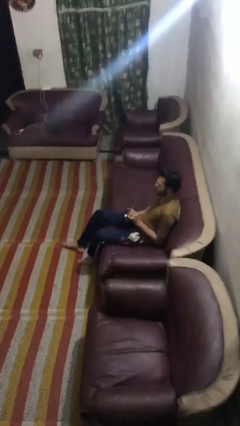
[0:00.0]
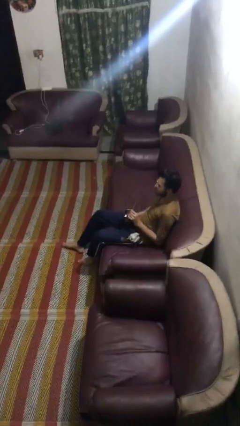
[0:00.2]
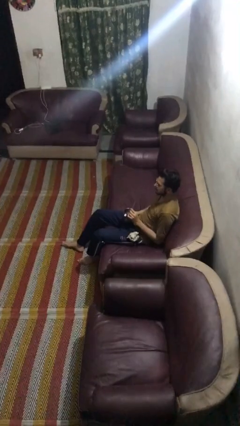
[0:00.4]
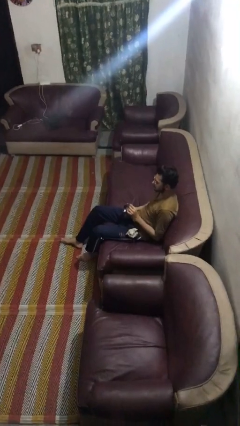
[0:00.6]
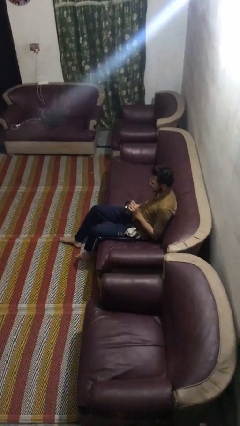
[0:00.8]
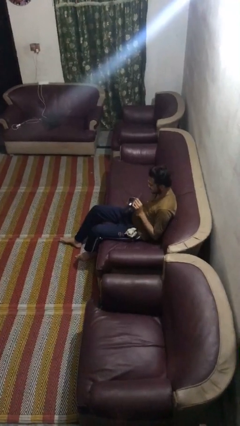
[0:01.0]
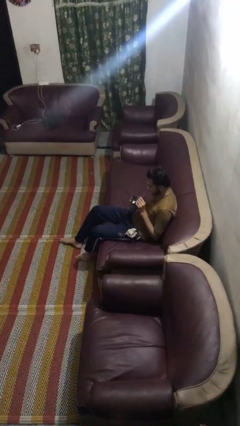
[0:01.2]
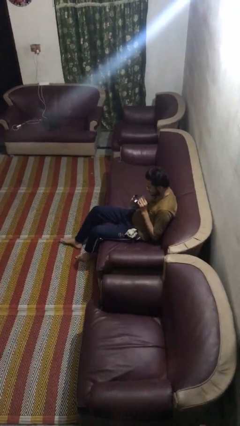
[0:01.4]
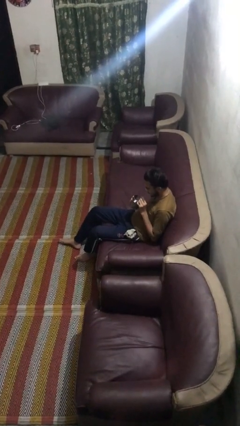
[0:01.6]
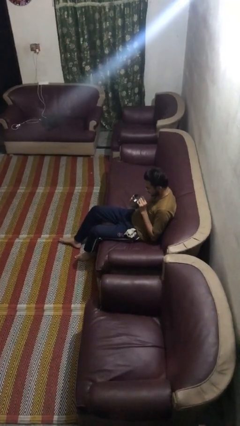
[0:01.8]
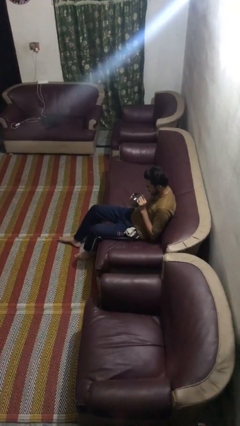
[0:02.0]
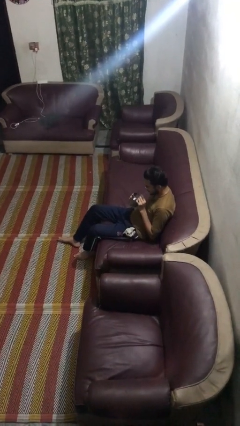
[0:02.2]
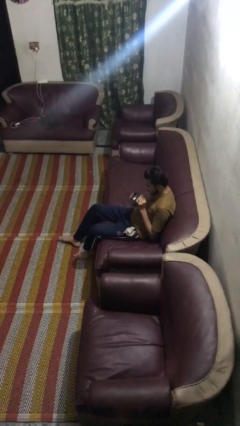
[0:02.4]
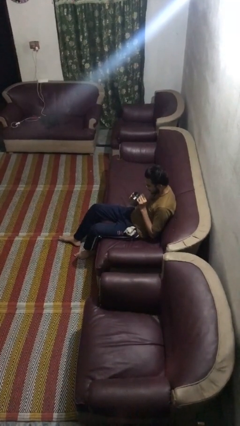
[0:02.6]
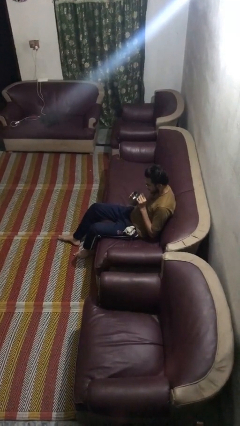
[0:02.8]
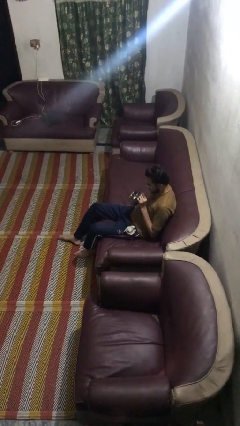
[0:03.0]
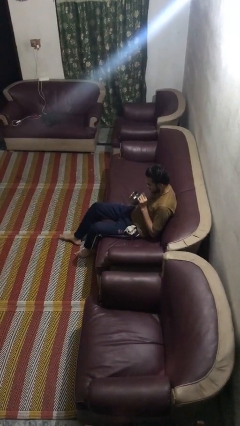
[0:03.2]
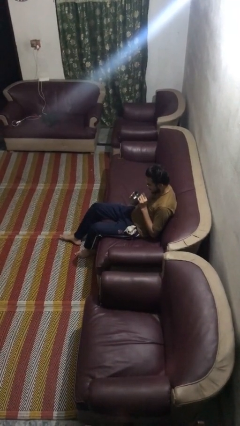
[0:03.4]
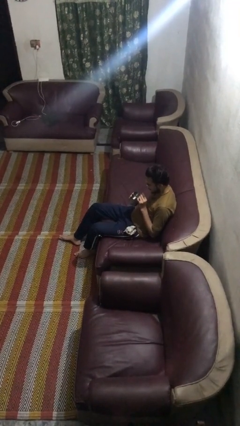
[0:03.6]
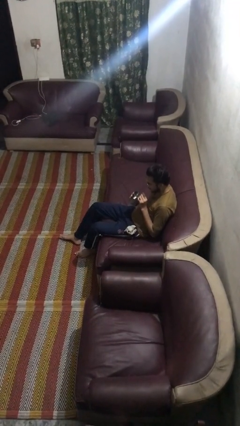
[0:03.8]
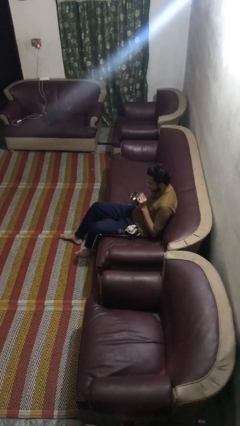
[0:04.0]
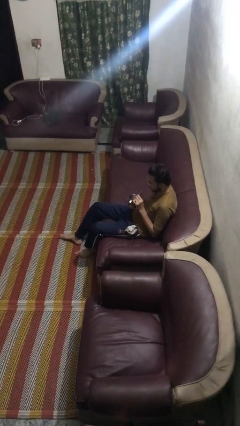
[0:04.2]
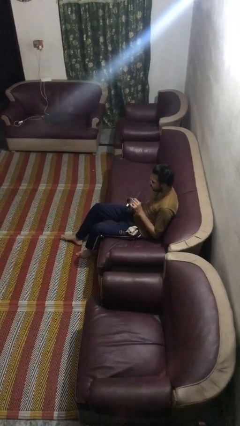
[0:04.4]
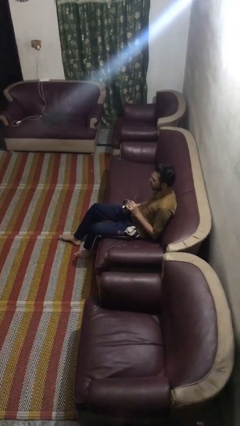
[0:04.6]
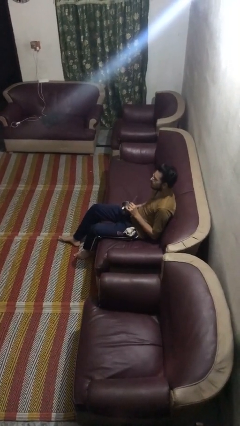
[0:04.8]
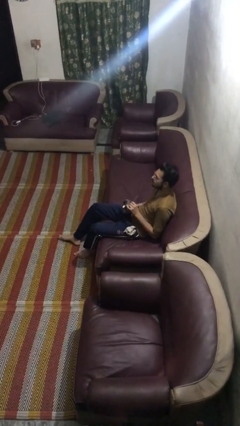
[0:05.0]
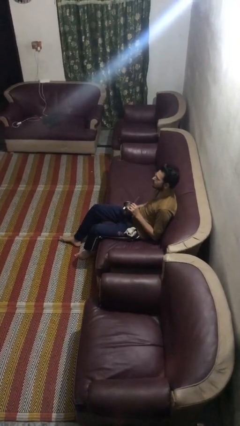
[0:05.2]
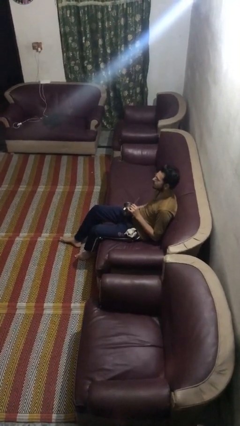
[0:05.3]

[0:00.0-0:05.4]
person drinks from straw

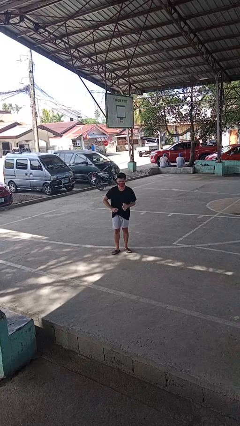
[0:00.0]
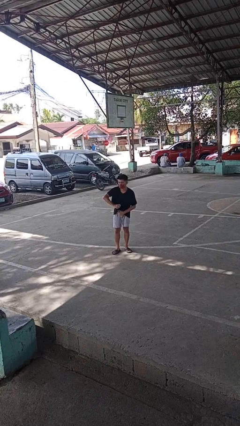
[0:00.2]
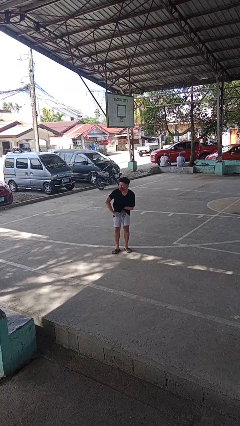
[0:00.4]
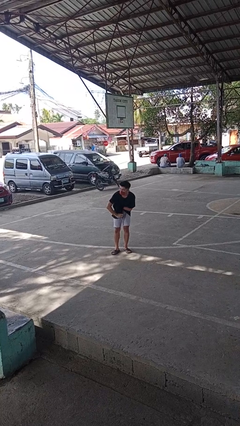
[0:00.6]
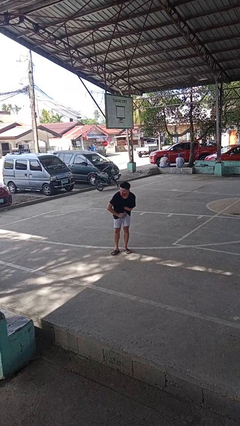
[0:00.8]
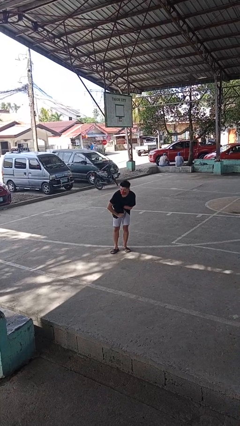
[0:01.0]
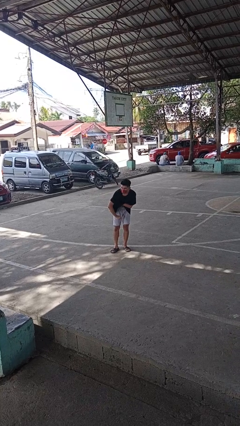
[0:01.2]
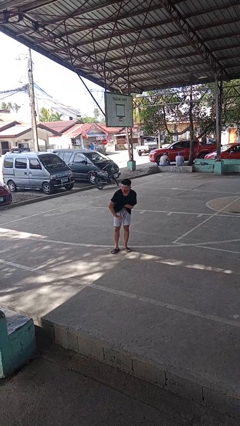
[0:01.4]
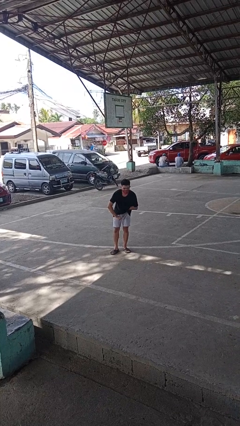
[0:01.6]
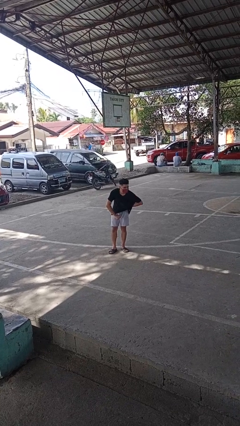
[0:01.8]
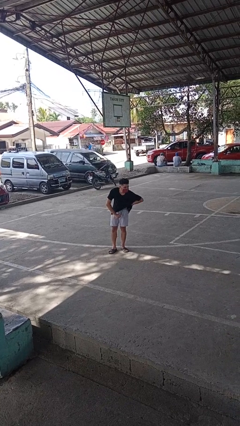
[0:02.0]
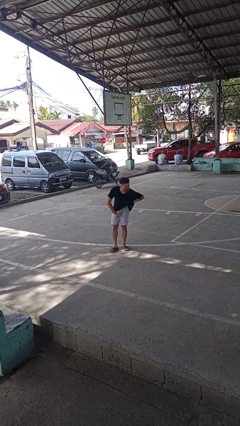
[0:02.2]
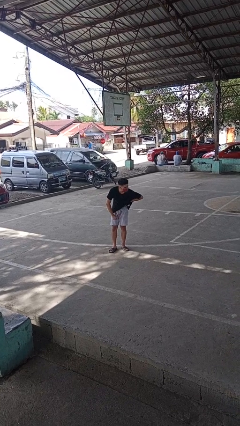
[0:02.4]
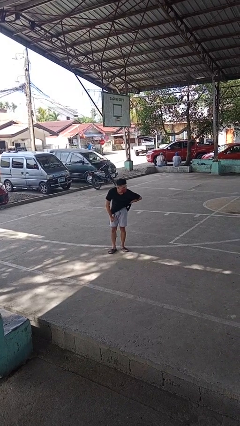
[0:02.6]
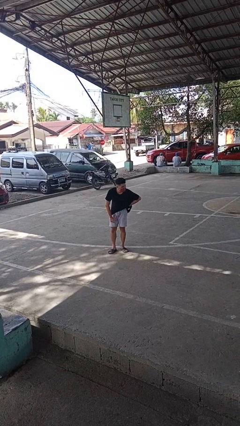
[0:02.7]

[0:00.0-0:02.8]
person applies deodorant

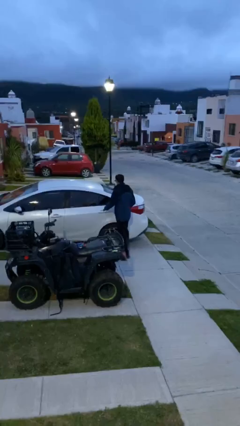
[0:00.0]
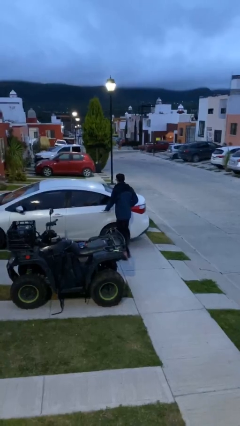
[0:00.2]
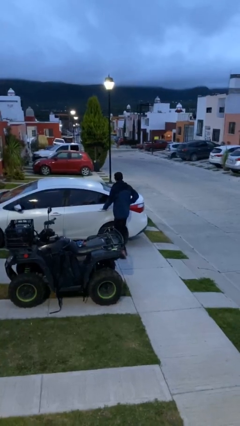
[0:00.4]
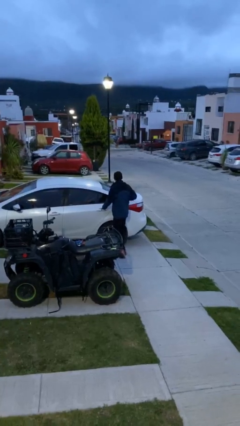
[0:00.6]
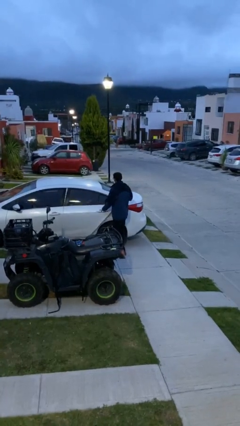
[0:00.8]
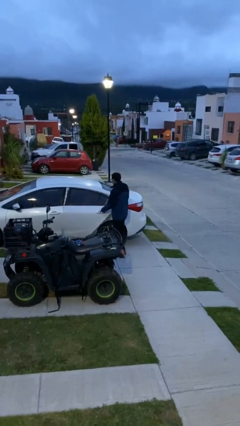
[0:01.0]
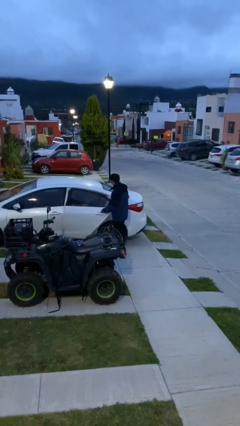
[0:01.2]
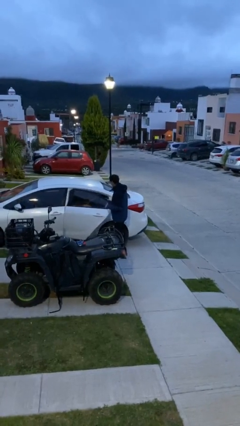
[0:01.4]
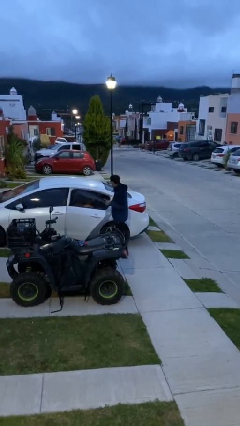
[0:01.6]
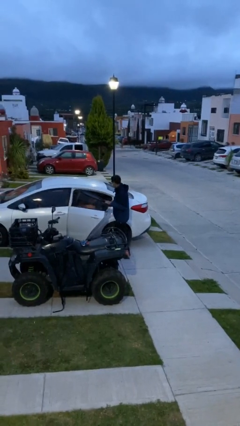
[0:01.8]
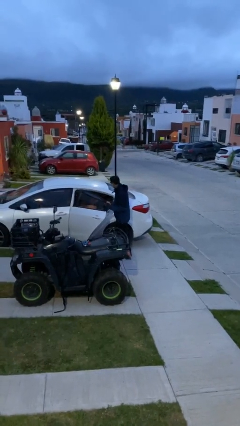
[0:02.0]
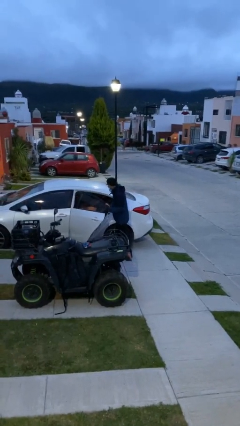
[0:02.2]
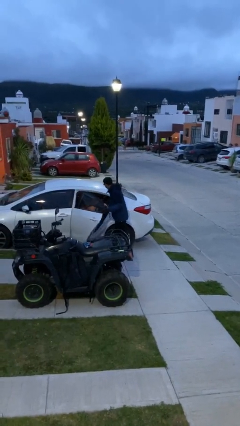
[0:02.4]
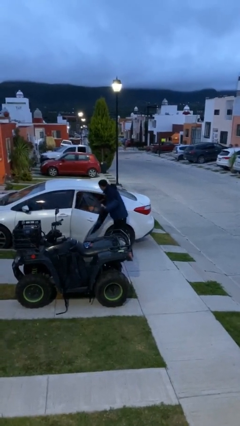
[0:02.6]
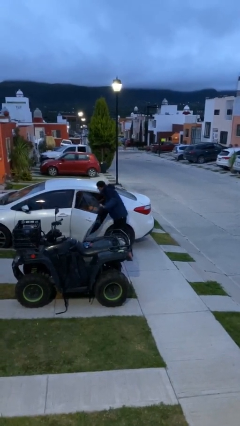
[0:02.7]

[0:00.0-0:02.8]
person opens car door

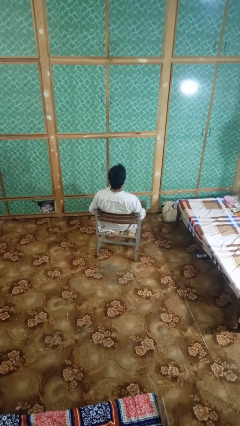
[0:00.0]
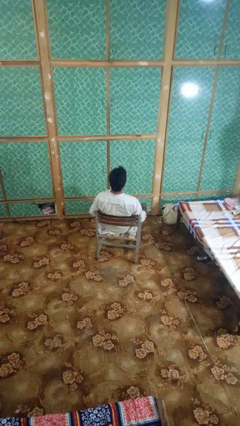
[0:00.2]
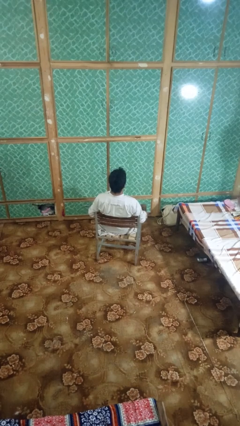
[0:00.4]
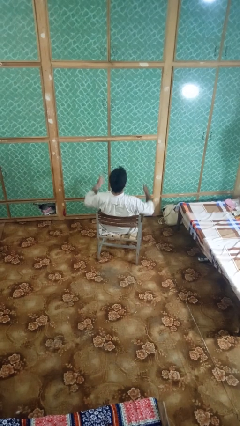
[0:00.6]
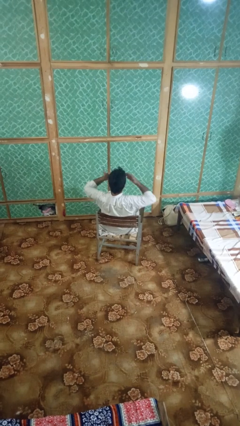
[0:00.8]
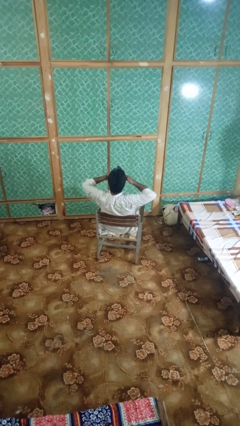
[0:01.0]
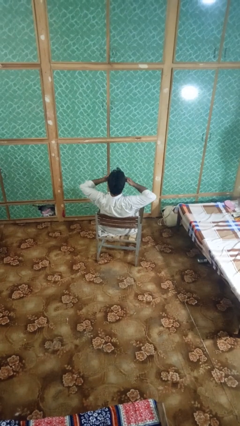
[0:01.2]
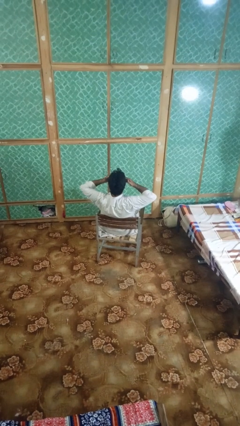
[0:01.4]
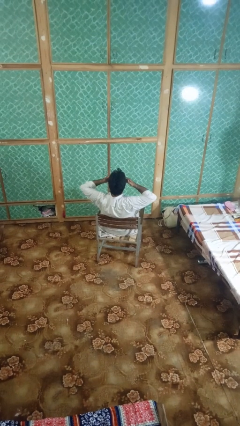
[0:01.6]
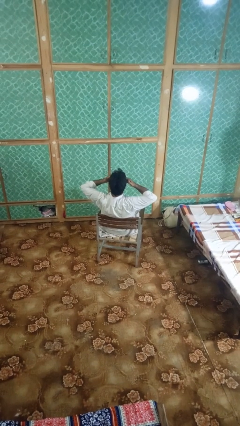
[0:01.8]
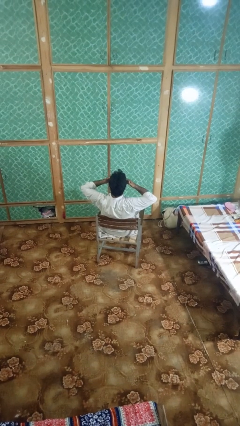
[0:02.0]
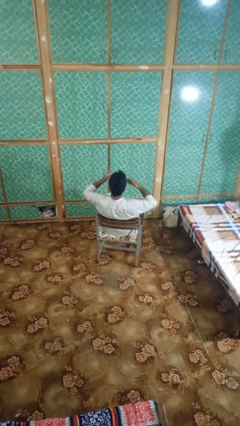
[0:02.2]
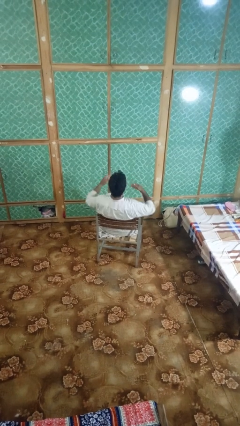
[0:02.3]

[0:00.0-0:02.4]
person shades eyes

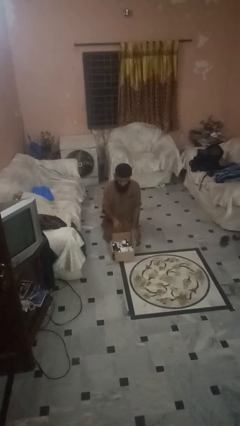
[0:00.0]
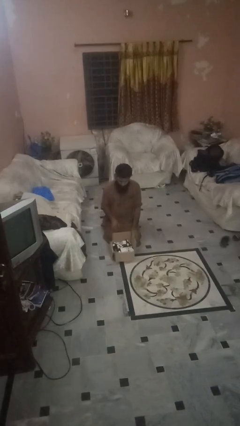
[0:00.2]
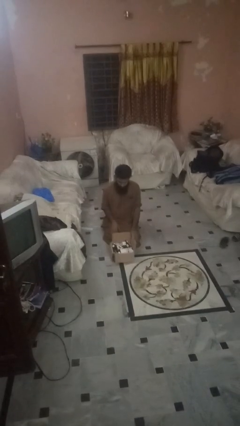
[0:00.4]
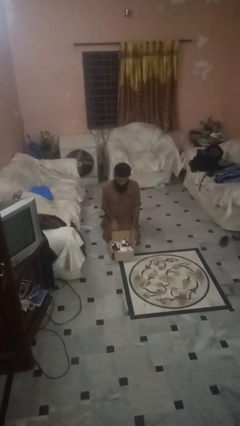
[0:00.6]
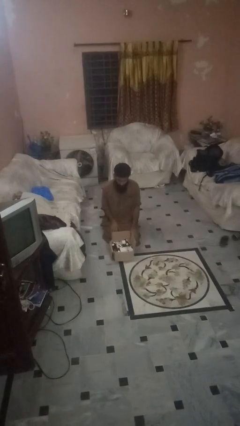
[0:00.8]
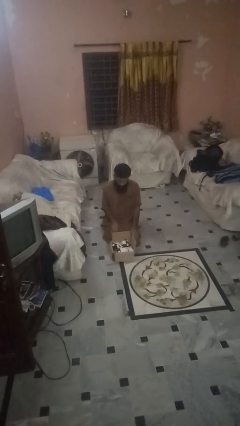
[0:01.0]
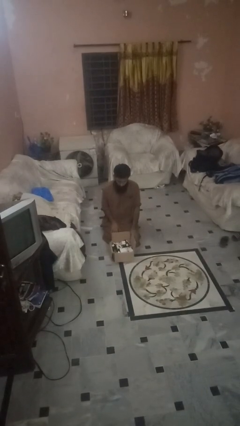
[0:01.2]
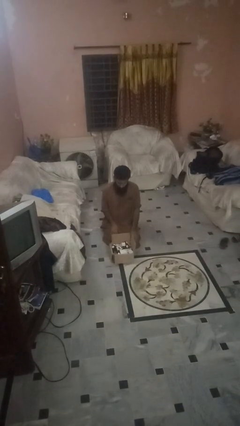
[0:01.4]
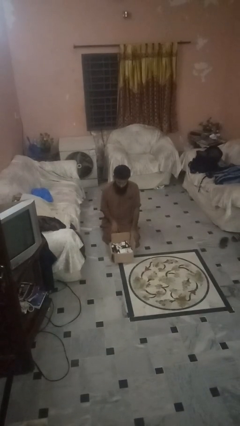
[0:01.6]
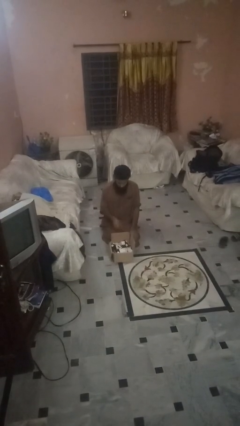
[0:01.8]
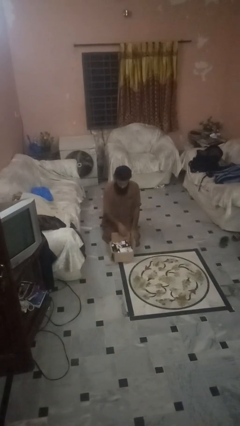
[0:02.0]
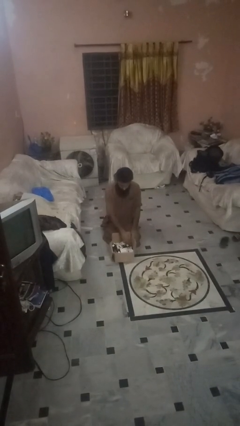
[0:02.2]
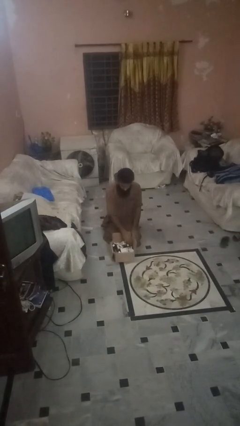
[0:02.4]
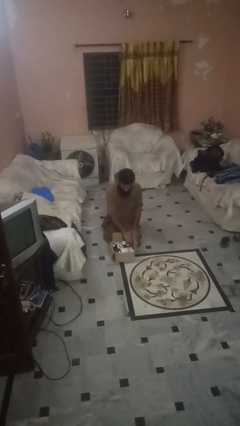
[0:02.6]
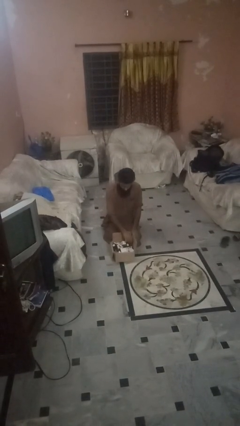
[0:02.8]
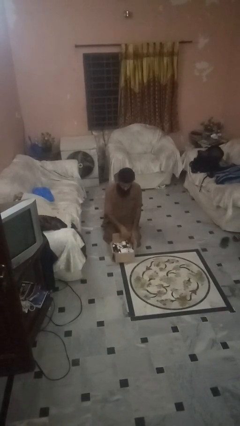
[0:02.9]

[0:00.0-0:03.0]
person takes object from box

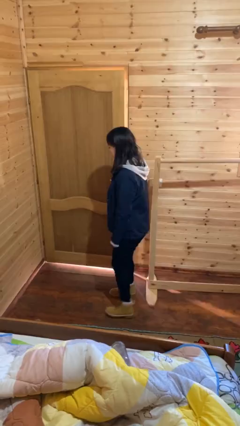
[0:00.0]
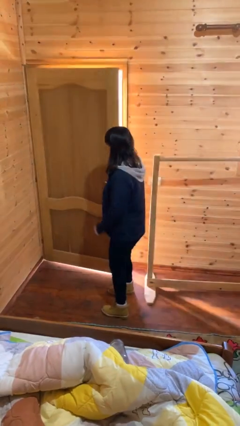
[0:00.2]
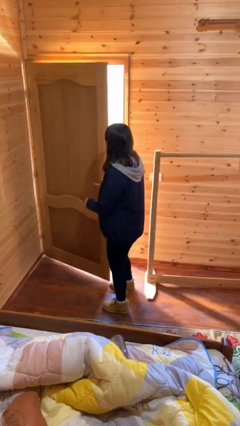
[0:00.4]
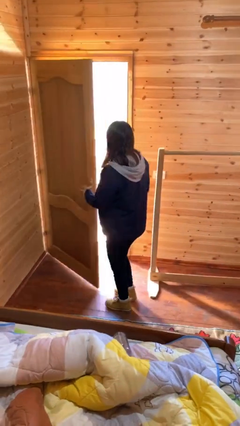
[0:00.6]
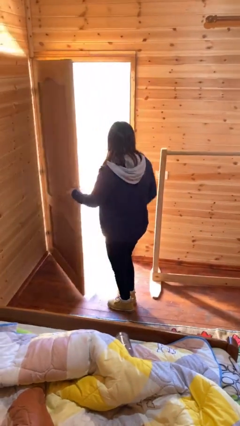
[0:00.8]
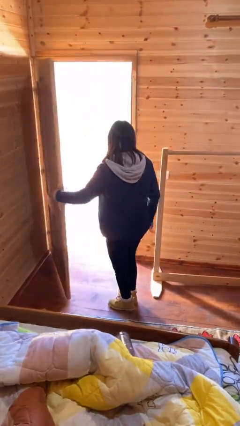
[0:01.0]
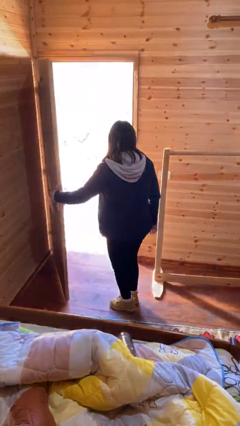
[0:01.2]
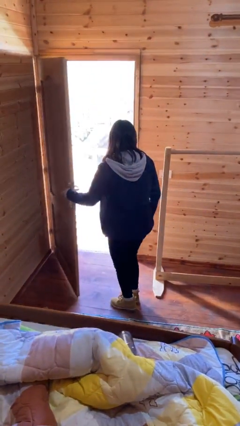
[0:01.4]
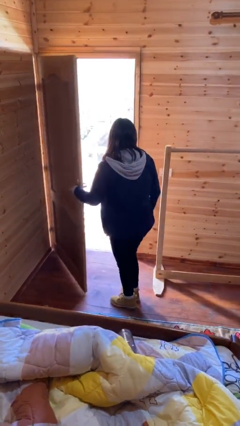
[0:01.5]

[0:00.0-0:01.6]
person opens facility door
